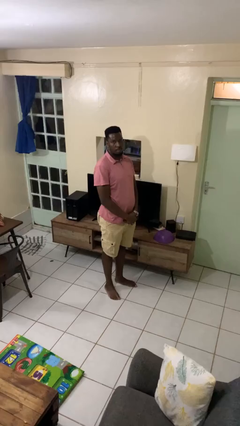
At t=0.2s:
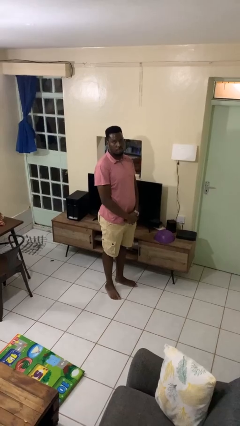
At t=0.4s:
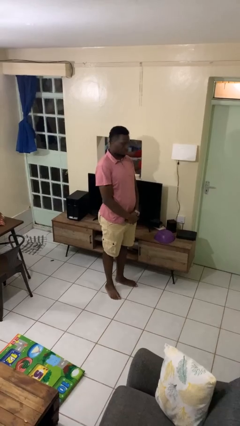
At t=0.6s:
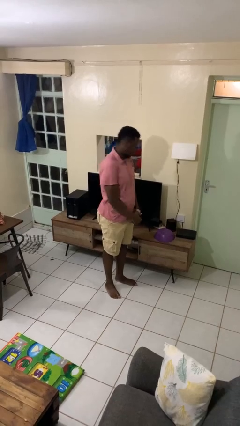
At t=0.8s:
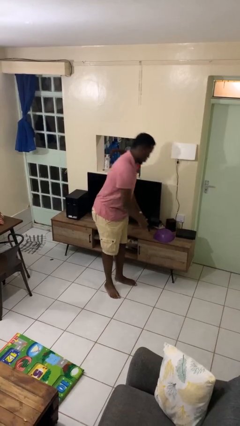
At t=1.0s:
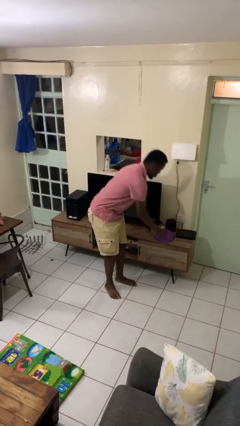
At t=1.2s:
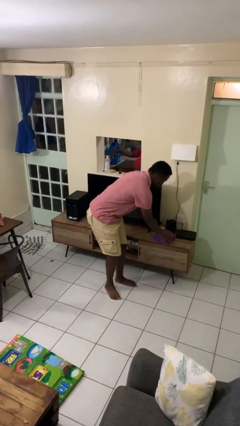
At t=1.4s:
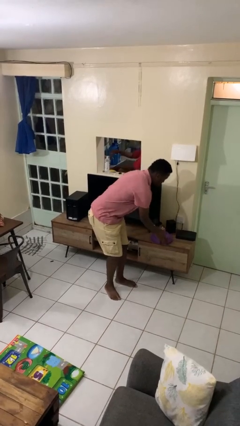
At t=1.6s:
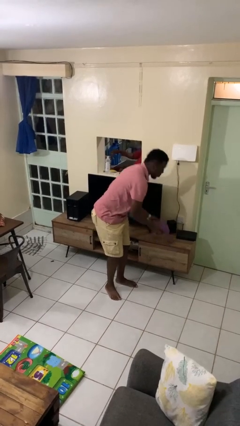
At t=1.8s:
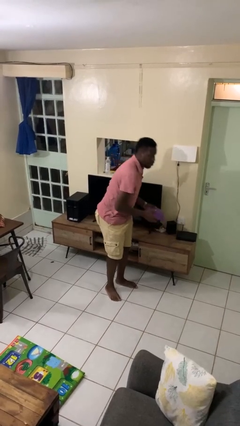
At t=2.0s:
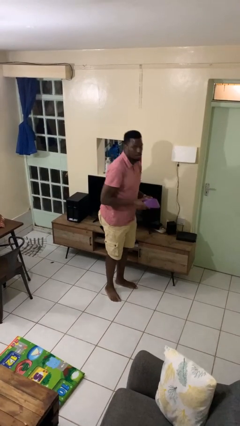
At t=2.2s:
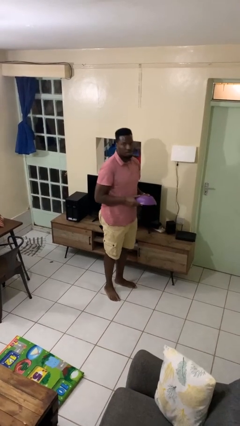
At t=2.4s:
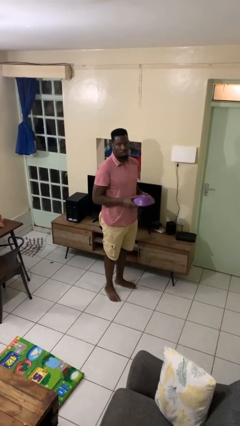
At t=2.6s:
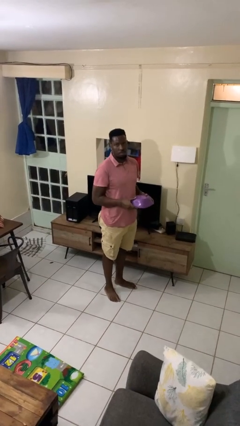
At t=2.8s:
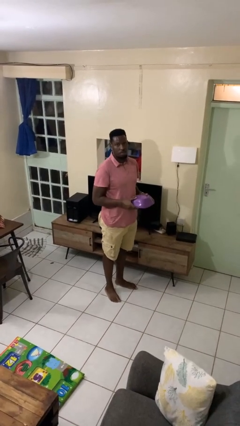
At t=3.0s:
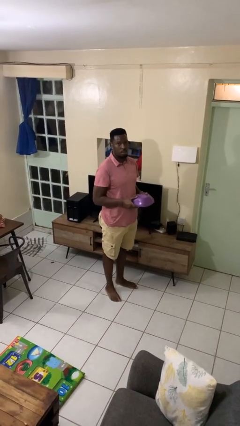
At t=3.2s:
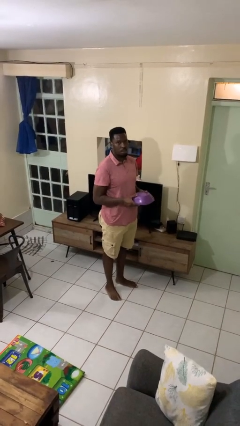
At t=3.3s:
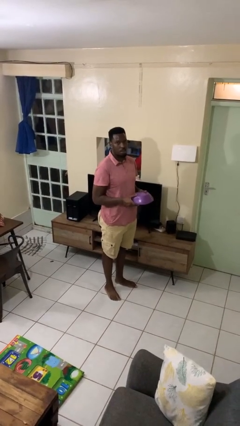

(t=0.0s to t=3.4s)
person picks up object from countertop

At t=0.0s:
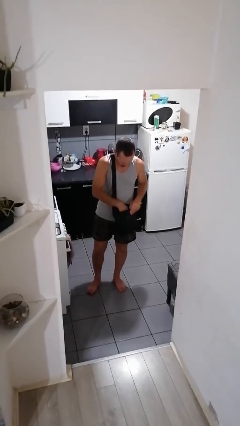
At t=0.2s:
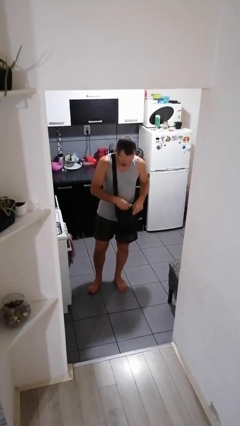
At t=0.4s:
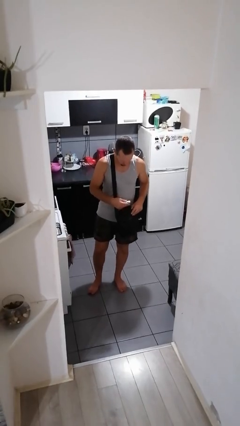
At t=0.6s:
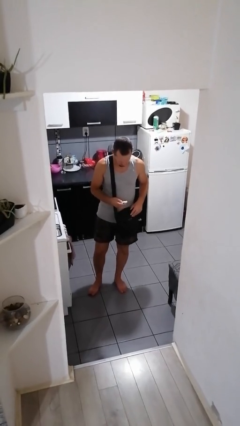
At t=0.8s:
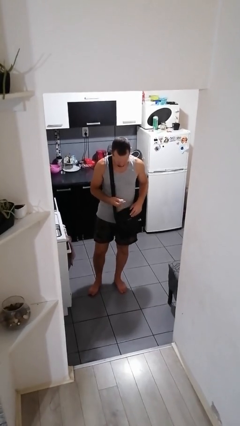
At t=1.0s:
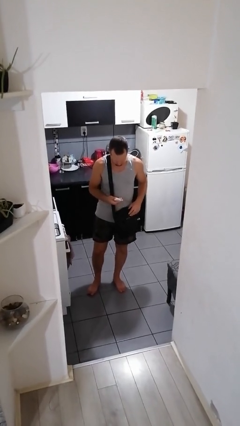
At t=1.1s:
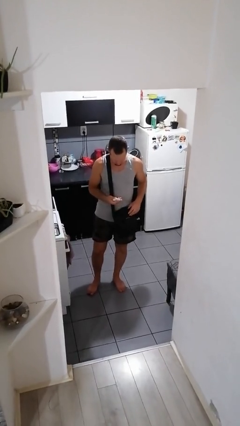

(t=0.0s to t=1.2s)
person takes object from purse

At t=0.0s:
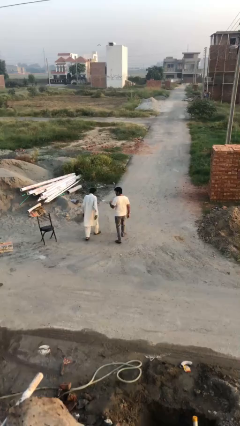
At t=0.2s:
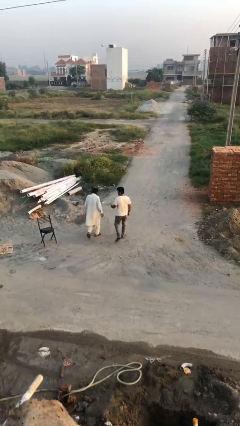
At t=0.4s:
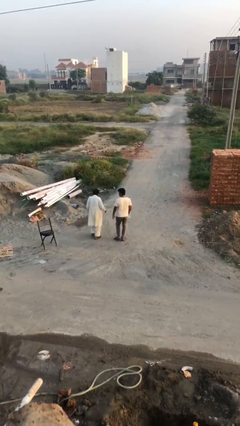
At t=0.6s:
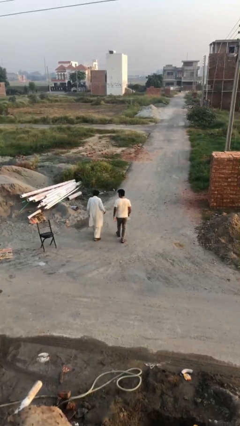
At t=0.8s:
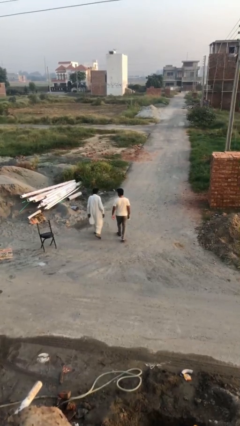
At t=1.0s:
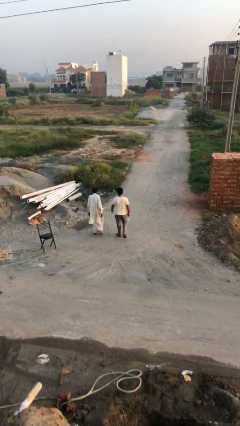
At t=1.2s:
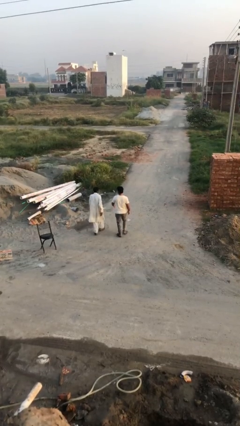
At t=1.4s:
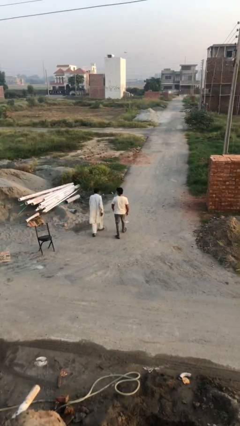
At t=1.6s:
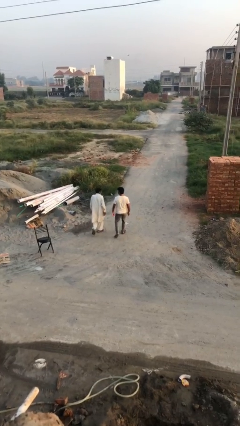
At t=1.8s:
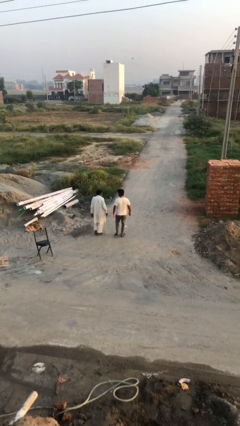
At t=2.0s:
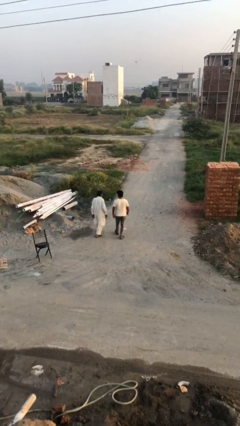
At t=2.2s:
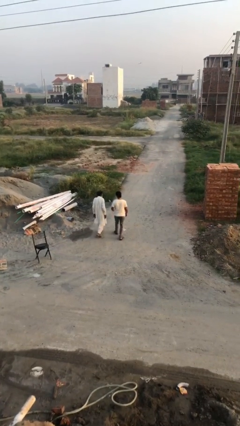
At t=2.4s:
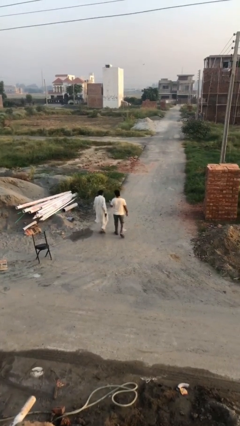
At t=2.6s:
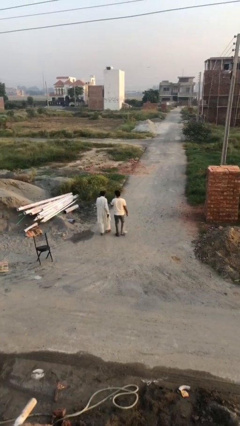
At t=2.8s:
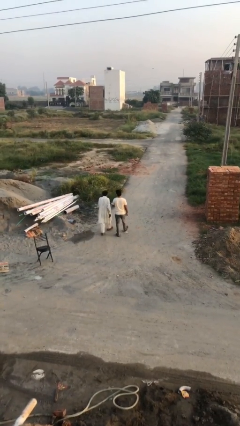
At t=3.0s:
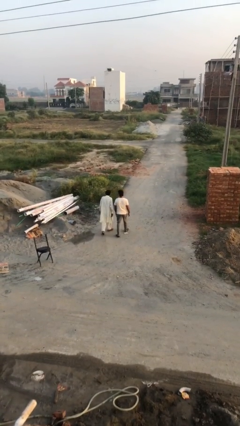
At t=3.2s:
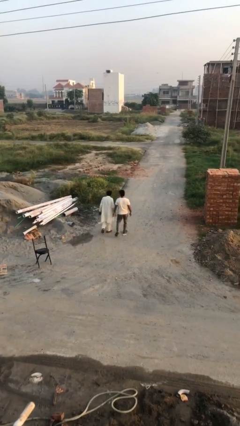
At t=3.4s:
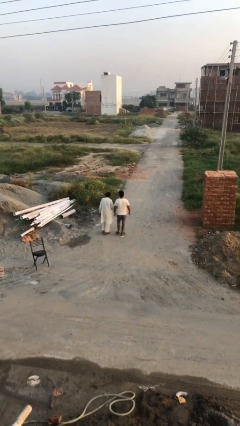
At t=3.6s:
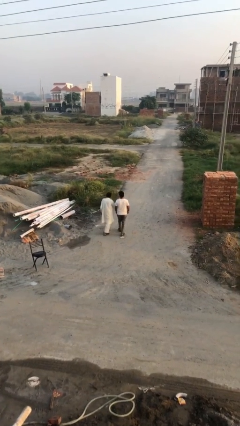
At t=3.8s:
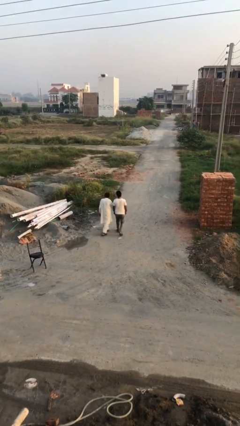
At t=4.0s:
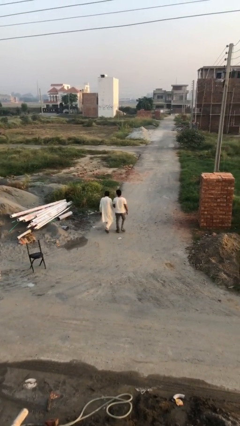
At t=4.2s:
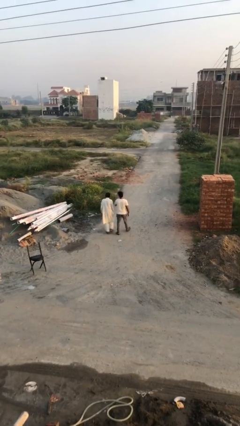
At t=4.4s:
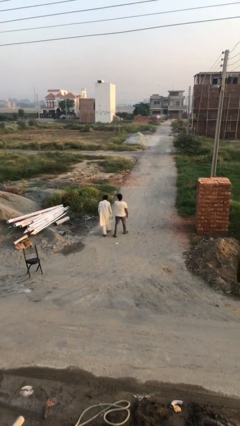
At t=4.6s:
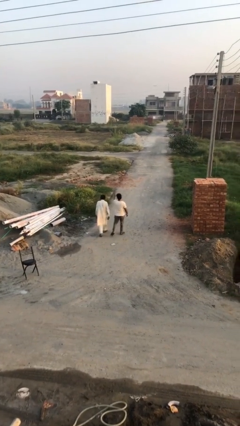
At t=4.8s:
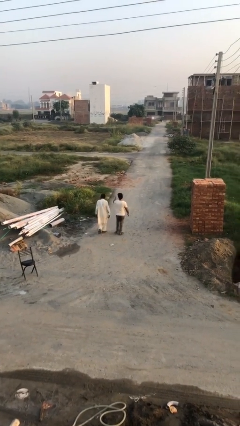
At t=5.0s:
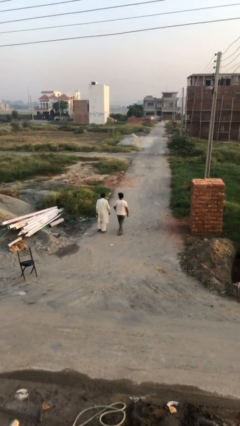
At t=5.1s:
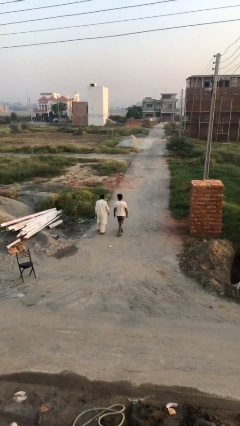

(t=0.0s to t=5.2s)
person talks to person

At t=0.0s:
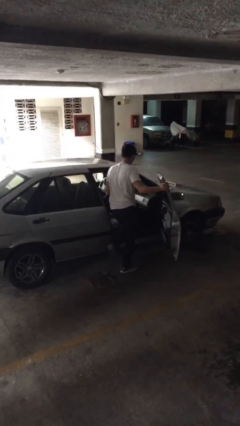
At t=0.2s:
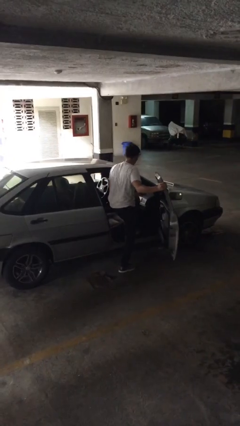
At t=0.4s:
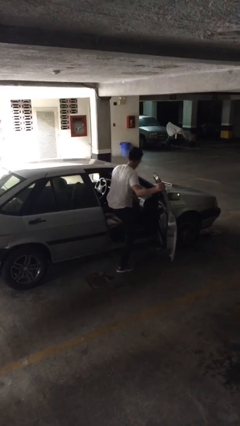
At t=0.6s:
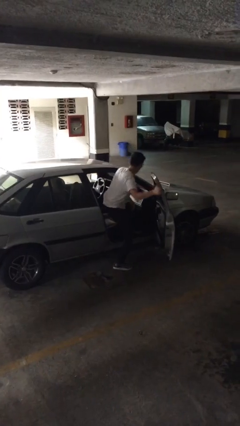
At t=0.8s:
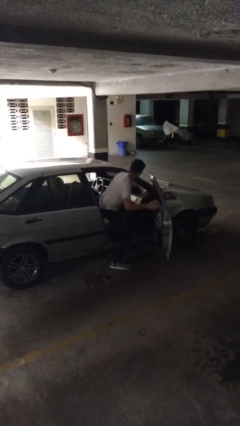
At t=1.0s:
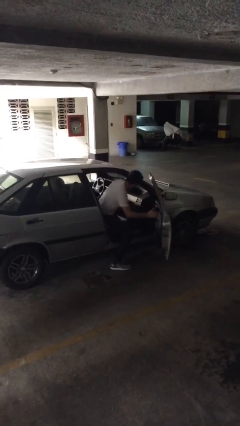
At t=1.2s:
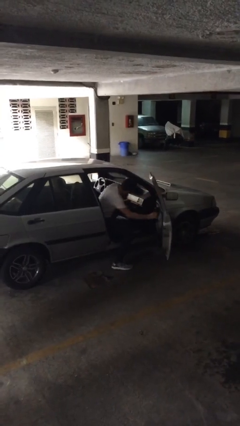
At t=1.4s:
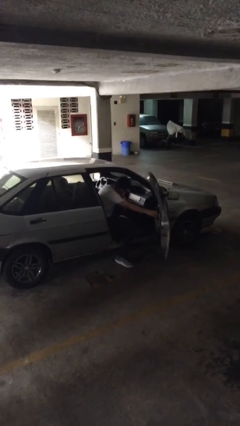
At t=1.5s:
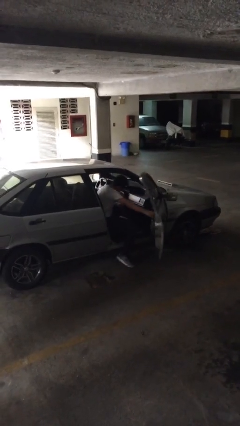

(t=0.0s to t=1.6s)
person enters car

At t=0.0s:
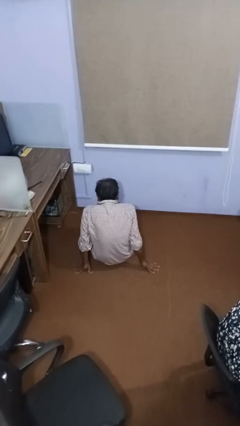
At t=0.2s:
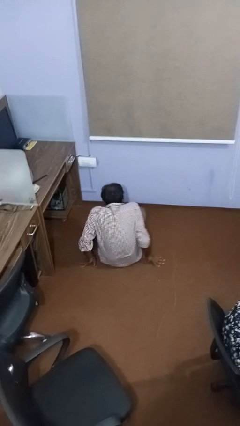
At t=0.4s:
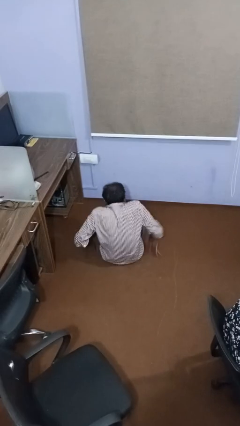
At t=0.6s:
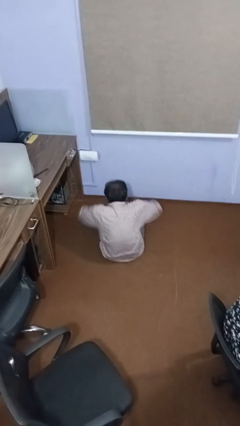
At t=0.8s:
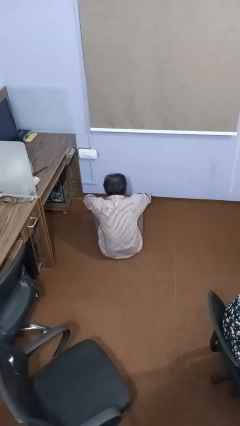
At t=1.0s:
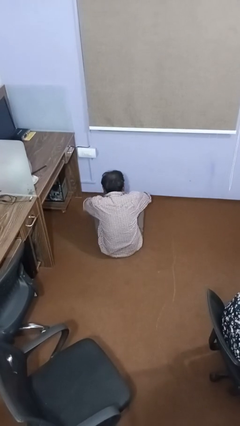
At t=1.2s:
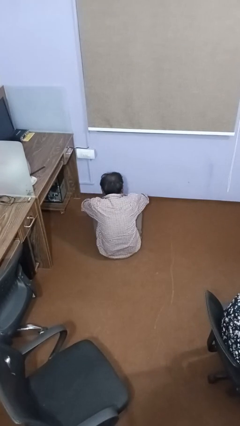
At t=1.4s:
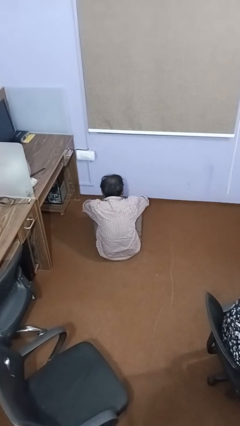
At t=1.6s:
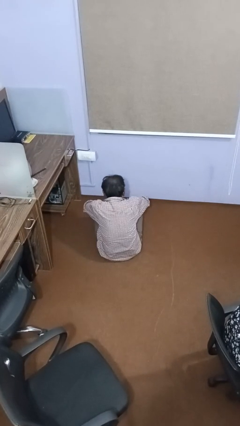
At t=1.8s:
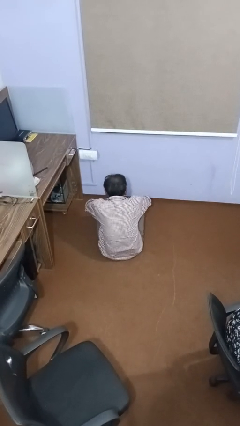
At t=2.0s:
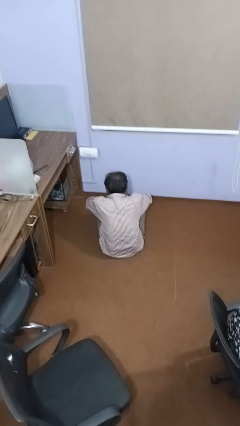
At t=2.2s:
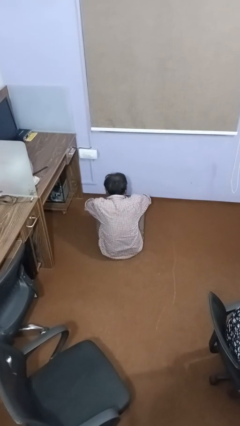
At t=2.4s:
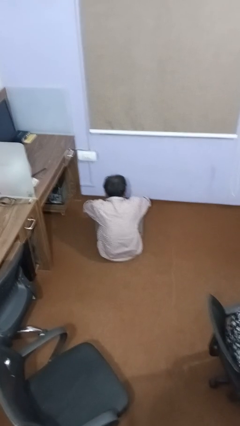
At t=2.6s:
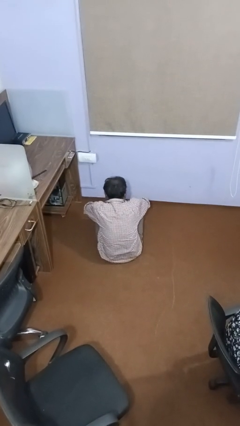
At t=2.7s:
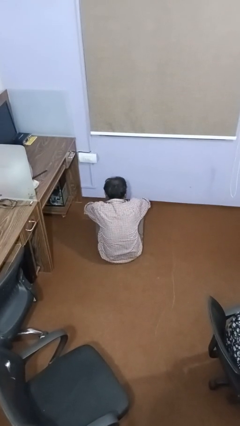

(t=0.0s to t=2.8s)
person crosses legs

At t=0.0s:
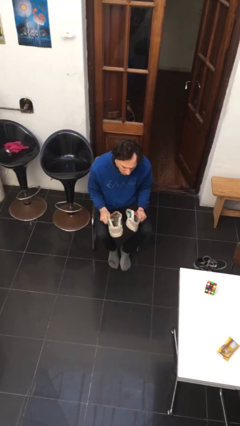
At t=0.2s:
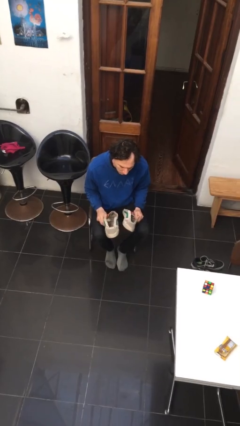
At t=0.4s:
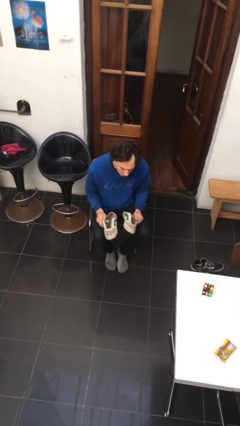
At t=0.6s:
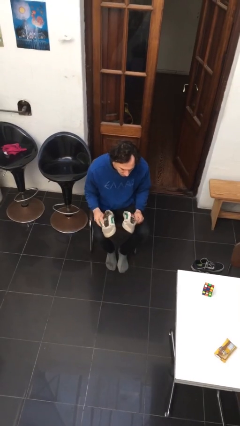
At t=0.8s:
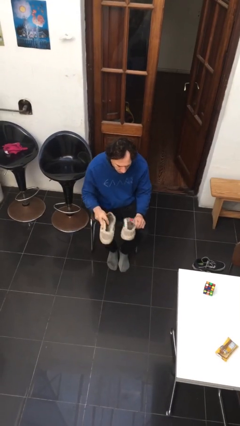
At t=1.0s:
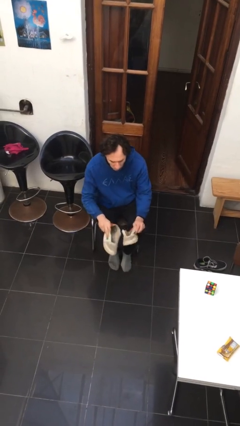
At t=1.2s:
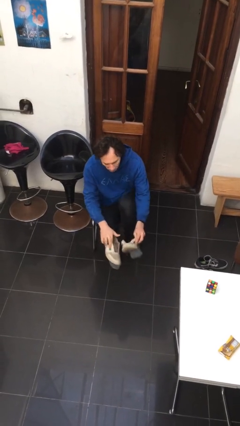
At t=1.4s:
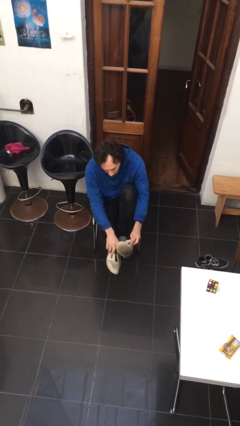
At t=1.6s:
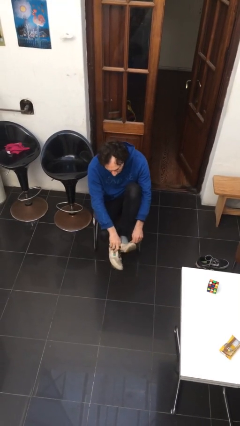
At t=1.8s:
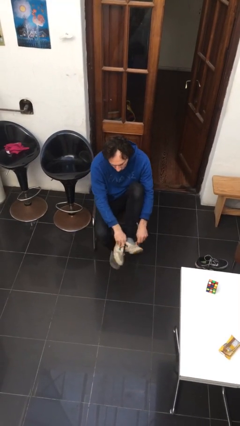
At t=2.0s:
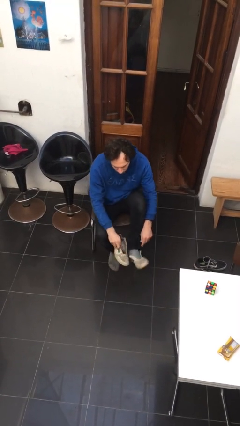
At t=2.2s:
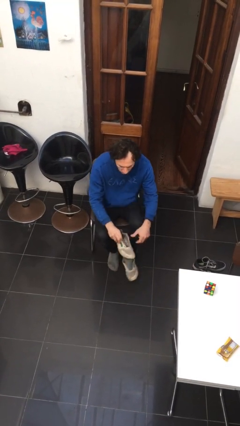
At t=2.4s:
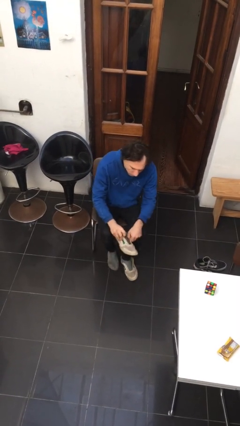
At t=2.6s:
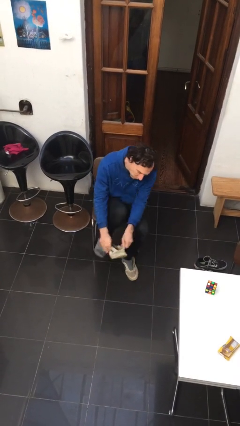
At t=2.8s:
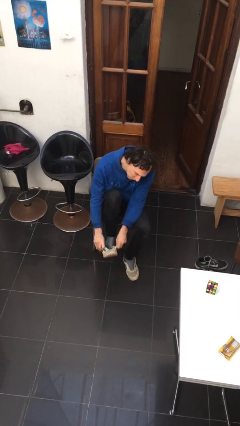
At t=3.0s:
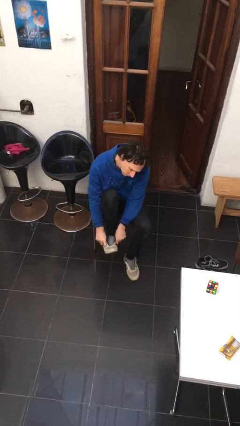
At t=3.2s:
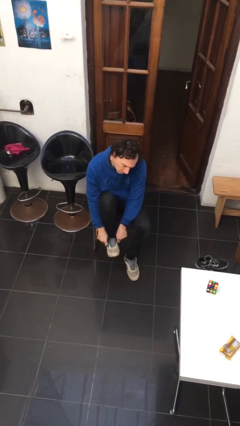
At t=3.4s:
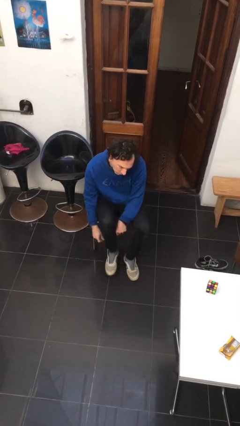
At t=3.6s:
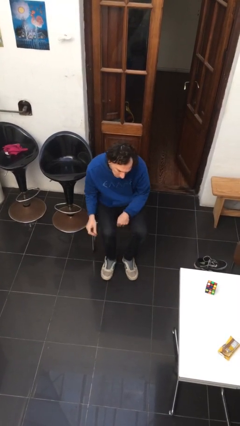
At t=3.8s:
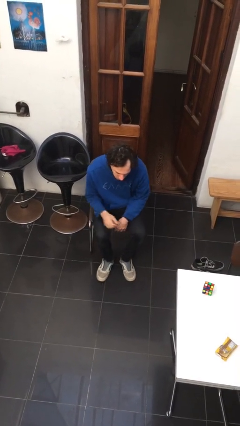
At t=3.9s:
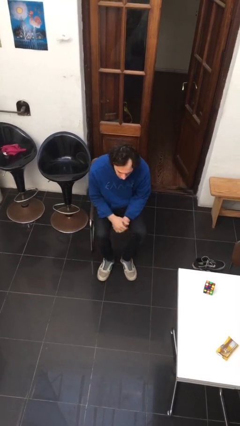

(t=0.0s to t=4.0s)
person puts on shoes
